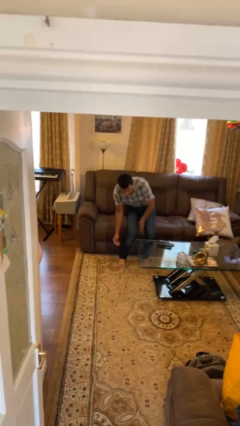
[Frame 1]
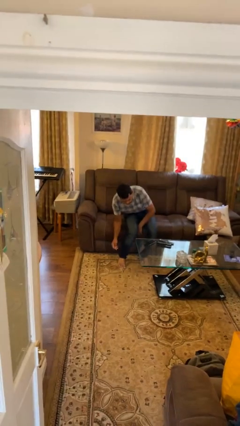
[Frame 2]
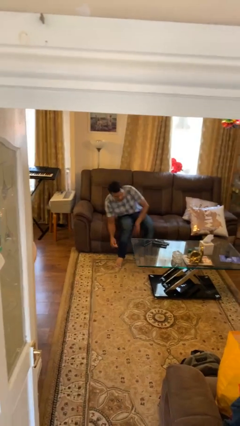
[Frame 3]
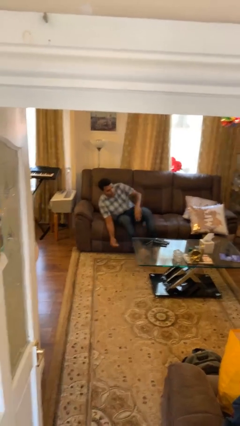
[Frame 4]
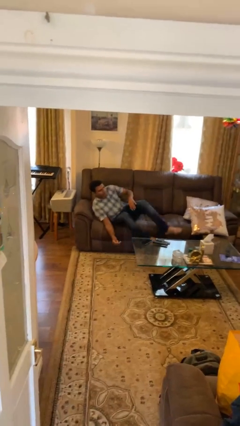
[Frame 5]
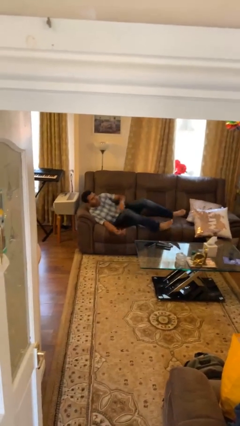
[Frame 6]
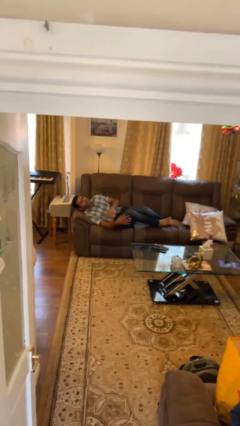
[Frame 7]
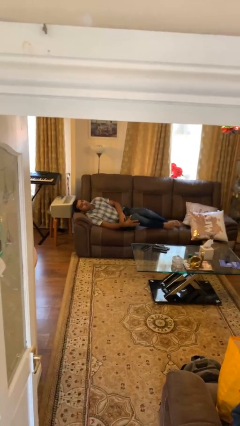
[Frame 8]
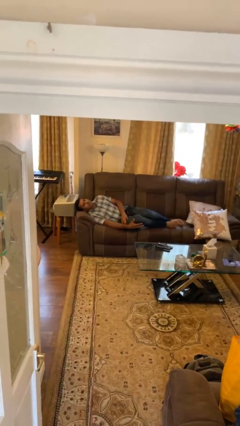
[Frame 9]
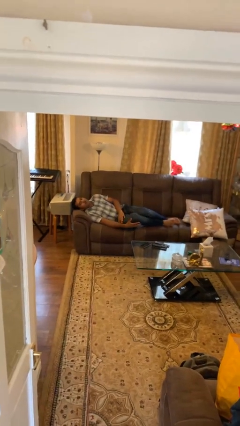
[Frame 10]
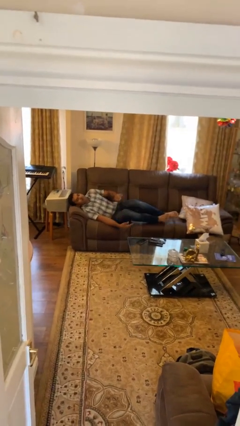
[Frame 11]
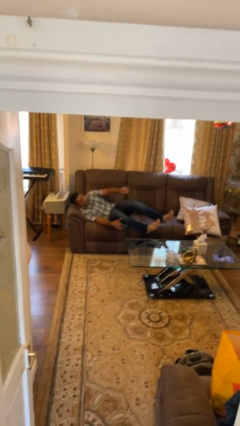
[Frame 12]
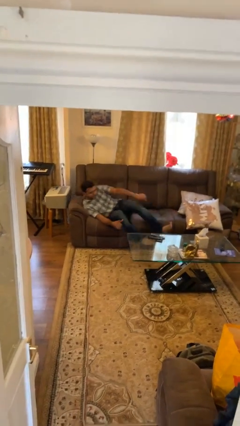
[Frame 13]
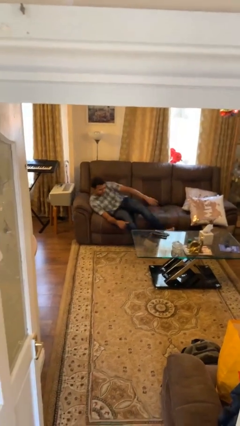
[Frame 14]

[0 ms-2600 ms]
person lies down on couch

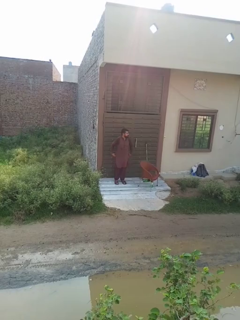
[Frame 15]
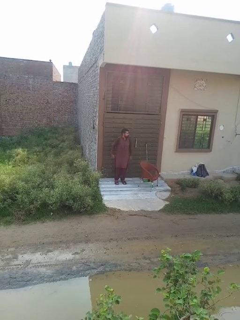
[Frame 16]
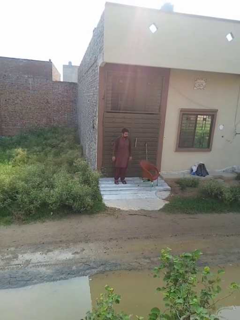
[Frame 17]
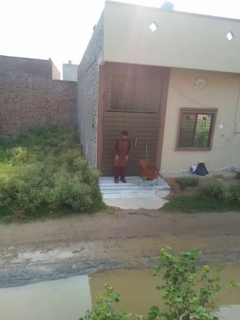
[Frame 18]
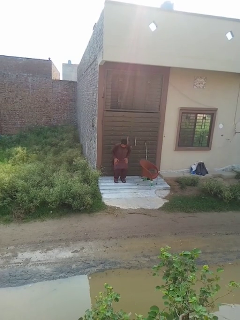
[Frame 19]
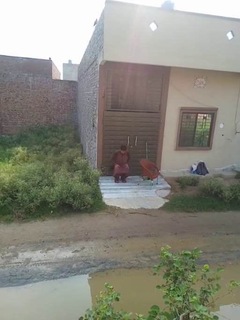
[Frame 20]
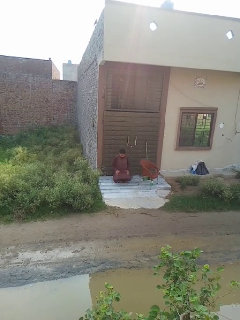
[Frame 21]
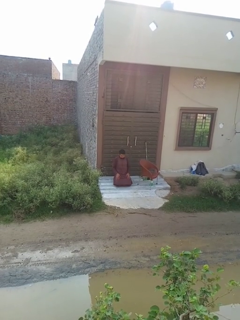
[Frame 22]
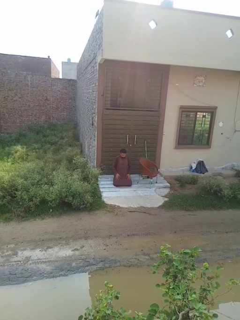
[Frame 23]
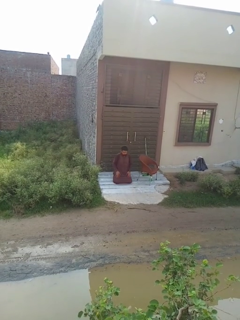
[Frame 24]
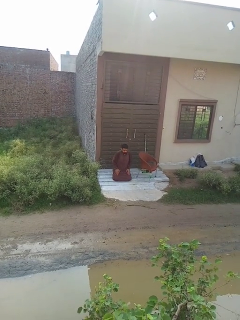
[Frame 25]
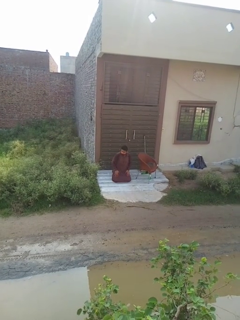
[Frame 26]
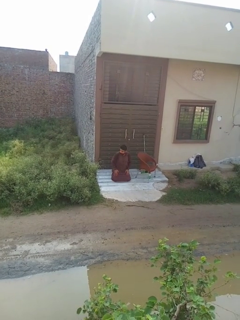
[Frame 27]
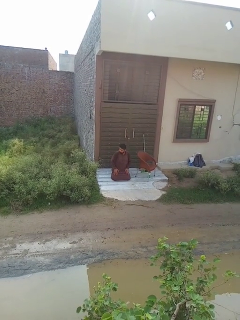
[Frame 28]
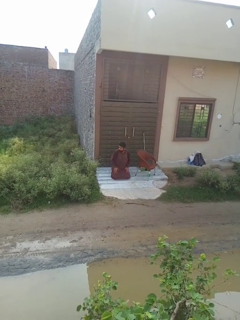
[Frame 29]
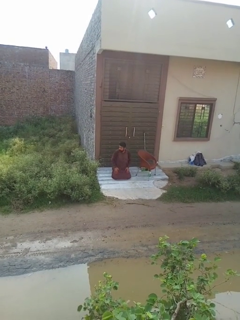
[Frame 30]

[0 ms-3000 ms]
person kneels

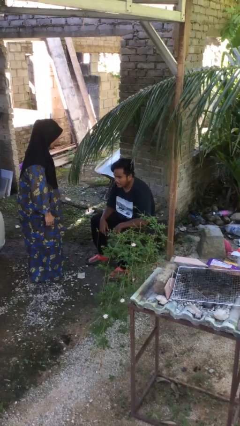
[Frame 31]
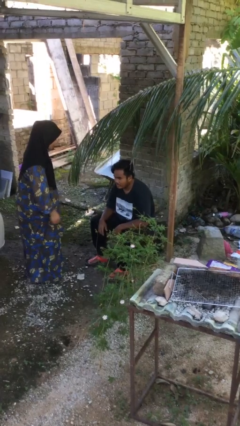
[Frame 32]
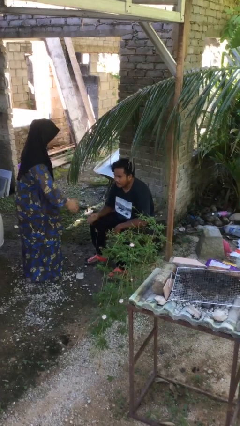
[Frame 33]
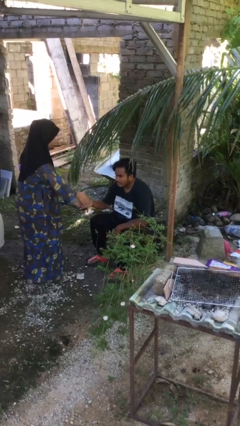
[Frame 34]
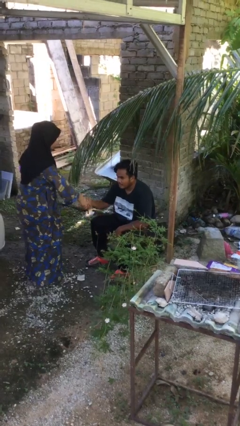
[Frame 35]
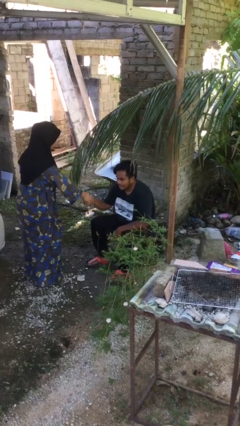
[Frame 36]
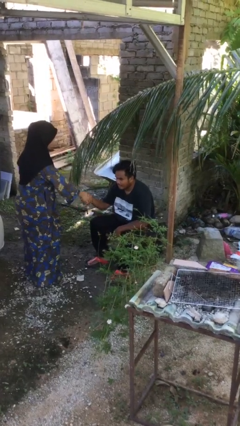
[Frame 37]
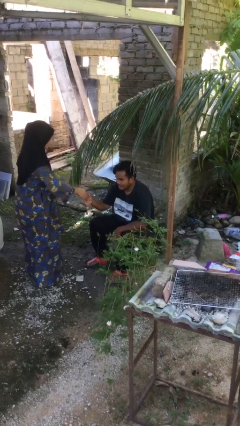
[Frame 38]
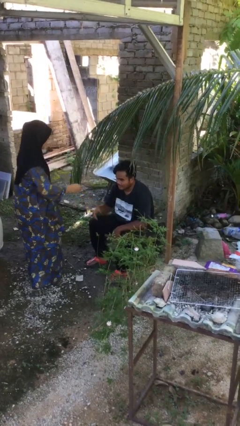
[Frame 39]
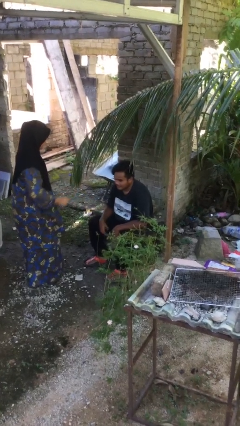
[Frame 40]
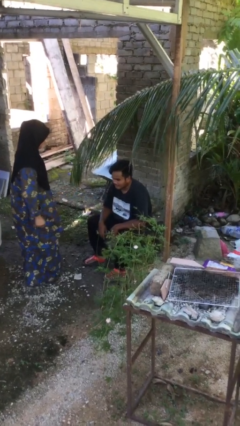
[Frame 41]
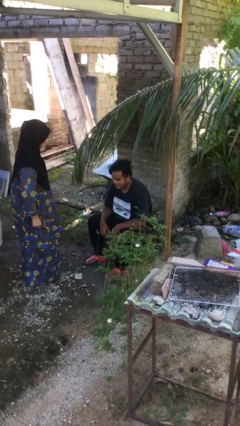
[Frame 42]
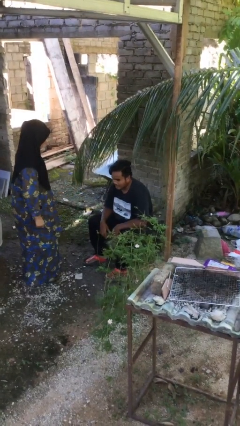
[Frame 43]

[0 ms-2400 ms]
person shakes hand

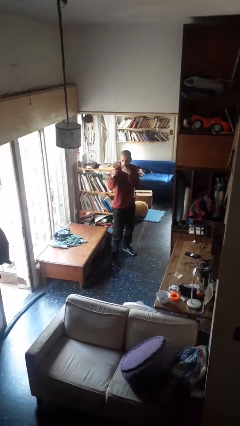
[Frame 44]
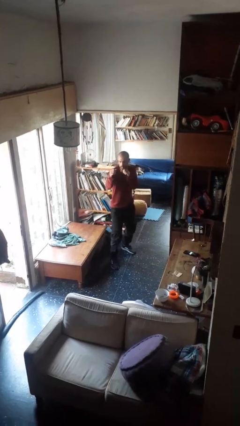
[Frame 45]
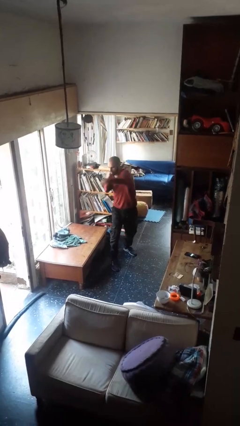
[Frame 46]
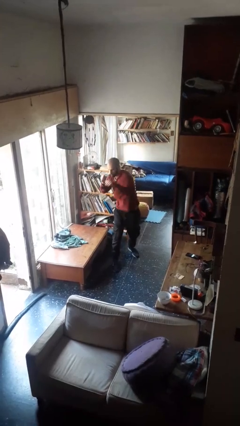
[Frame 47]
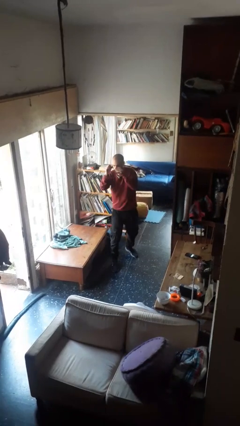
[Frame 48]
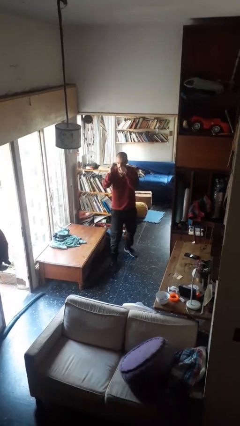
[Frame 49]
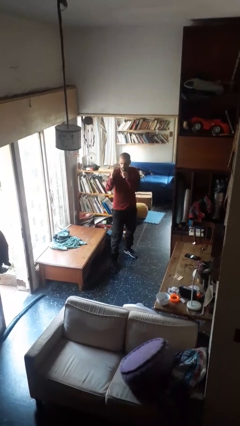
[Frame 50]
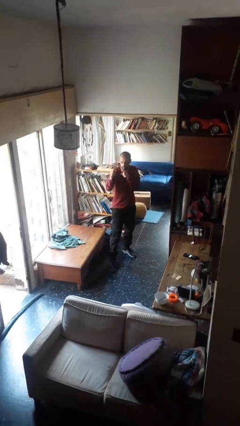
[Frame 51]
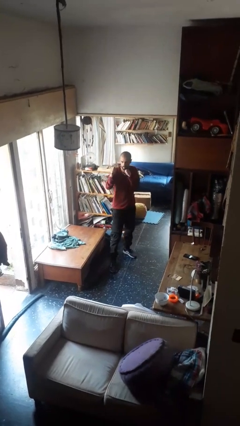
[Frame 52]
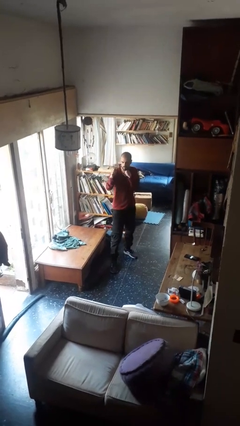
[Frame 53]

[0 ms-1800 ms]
person punches

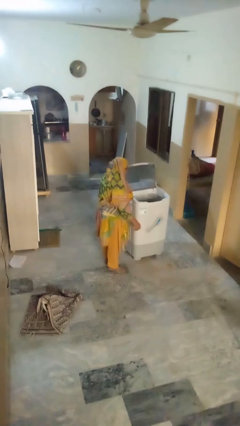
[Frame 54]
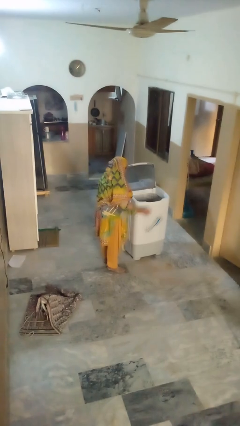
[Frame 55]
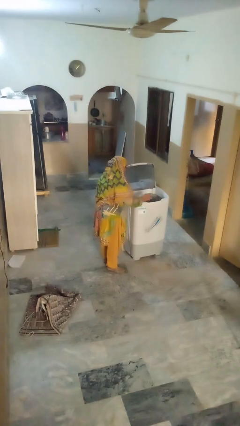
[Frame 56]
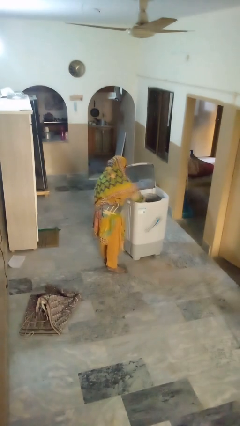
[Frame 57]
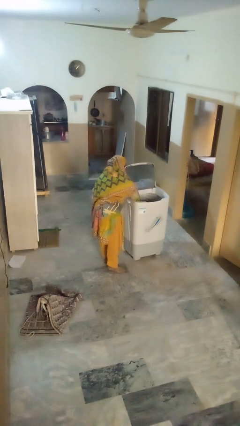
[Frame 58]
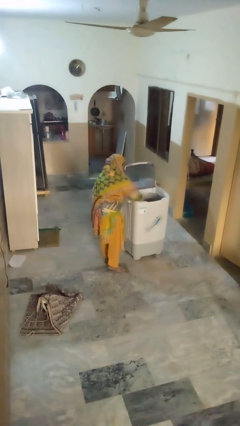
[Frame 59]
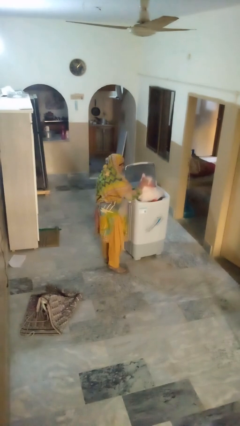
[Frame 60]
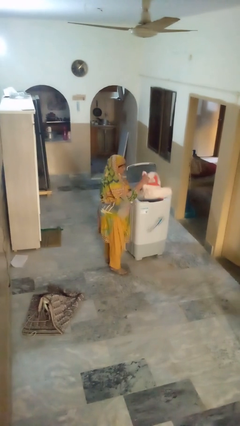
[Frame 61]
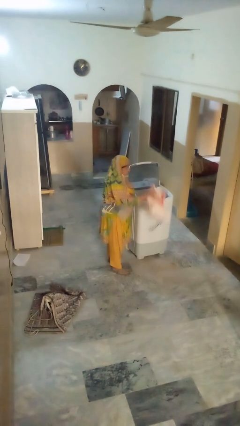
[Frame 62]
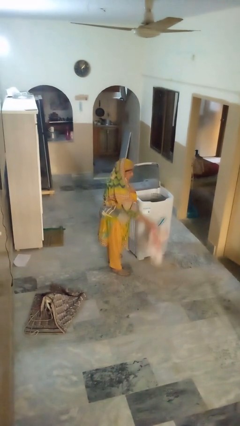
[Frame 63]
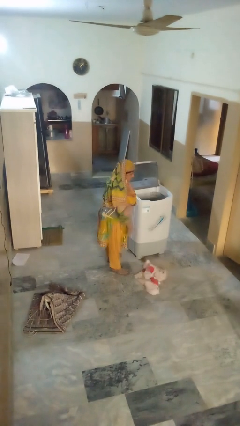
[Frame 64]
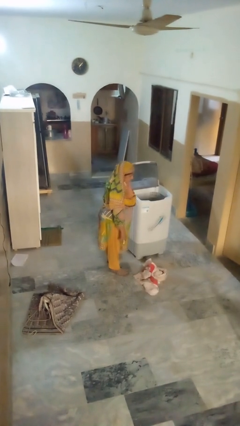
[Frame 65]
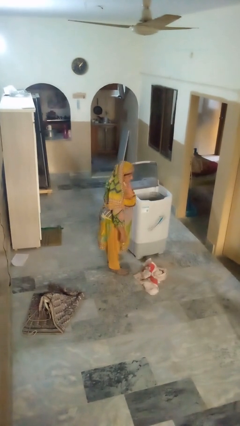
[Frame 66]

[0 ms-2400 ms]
person unloads clotheswasher

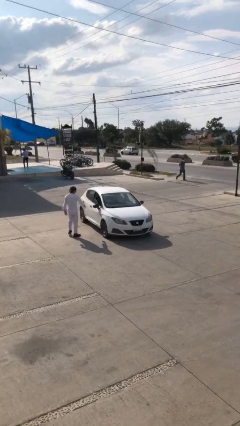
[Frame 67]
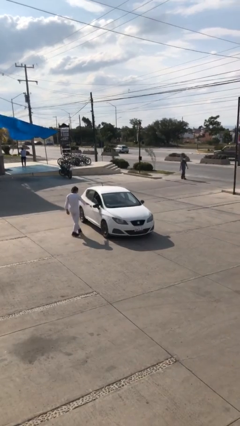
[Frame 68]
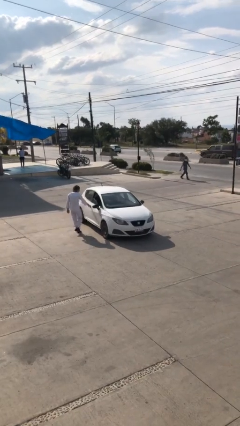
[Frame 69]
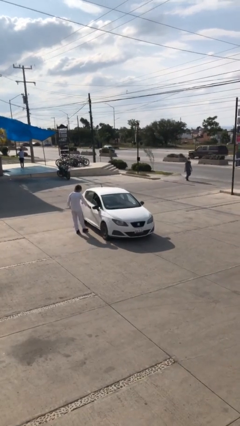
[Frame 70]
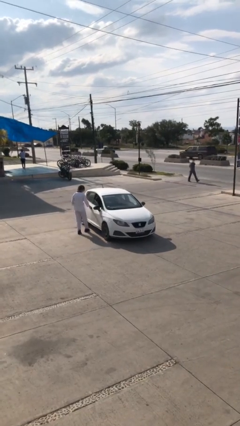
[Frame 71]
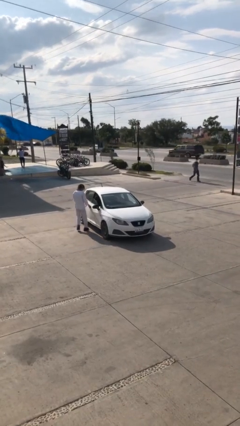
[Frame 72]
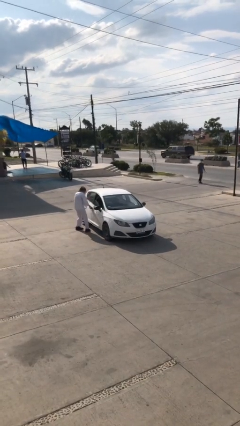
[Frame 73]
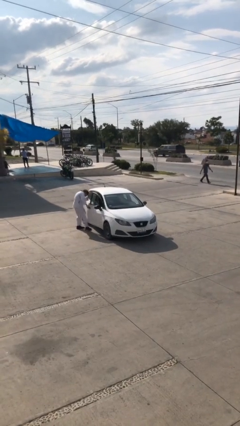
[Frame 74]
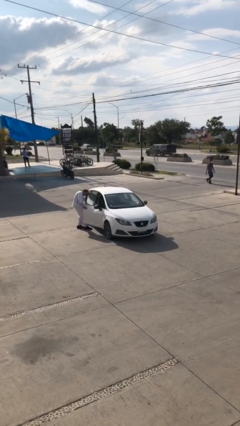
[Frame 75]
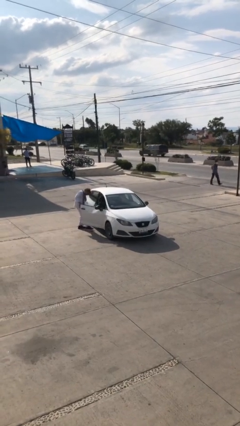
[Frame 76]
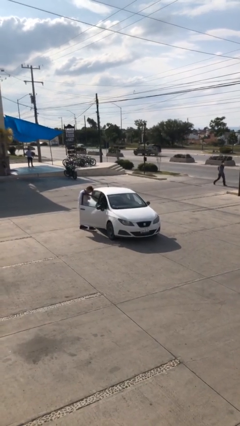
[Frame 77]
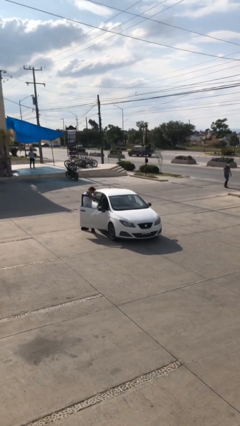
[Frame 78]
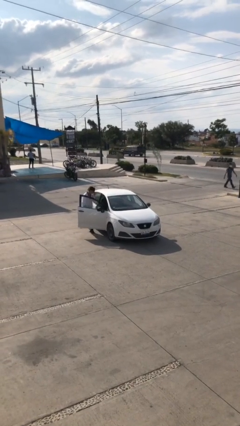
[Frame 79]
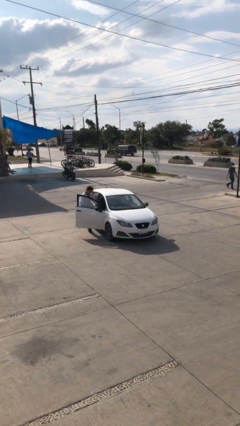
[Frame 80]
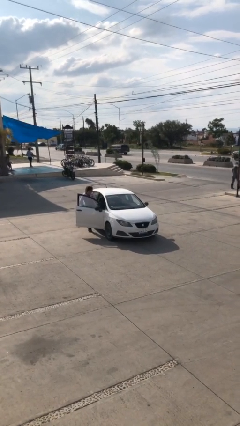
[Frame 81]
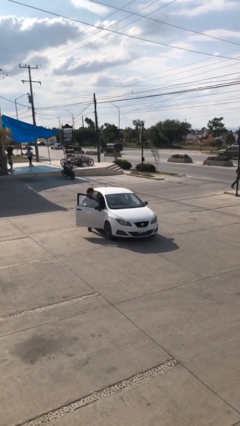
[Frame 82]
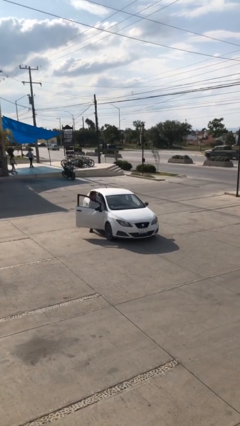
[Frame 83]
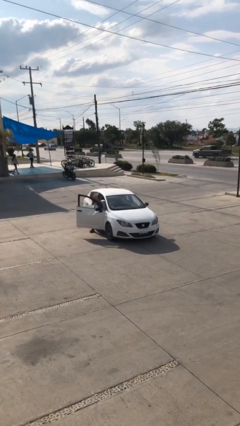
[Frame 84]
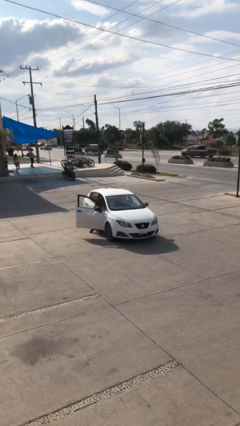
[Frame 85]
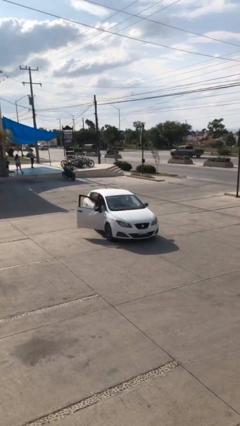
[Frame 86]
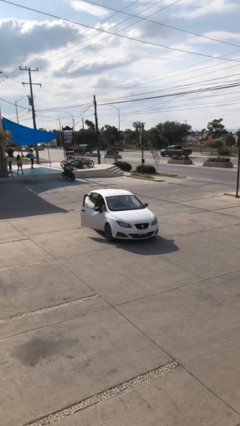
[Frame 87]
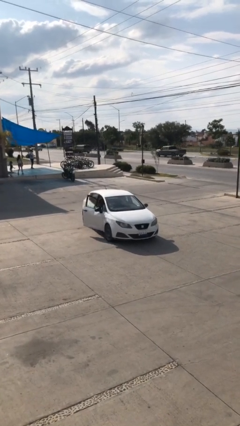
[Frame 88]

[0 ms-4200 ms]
car picks up person

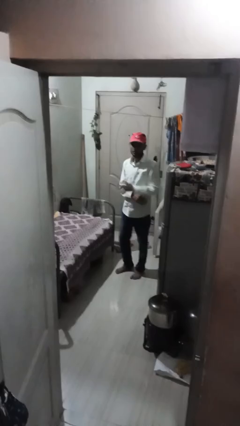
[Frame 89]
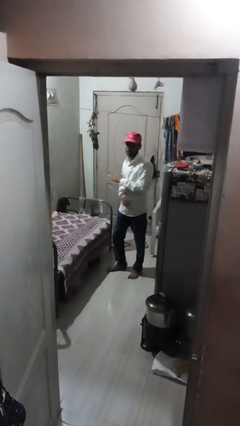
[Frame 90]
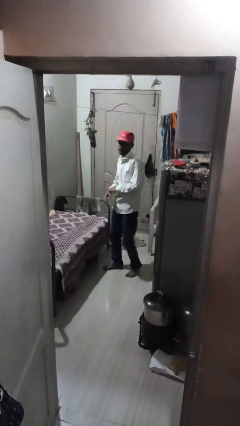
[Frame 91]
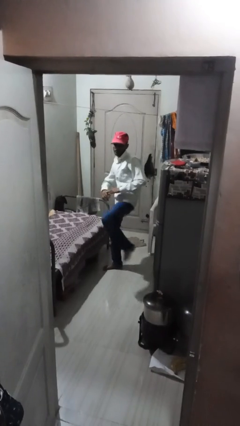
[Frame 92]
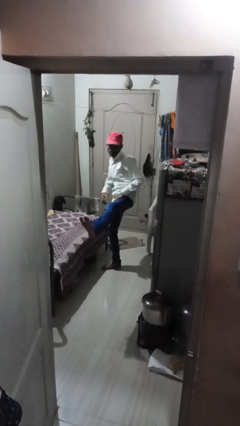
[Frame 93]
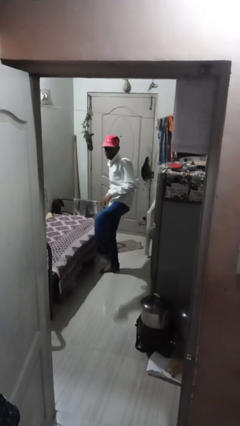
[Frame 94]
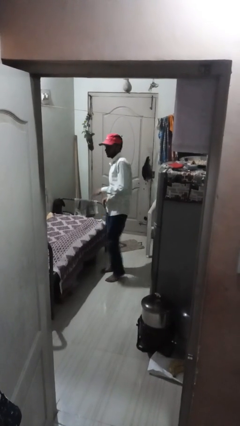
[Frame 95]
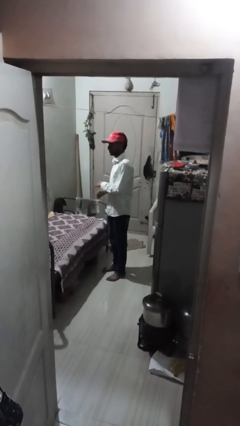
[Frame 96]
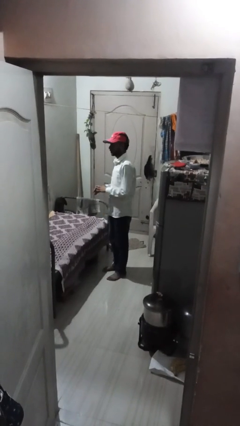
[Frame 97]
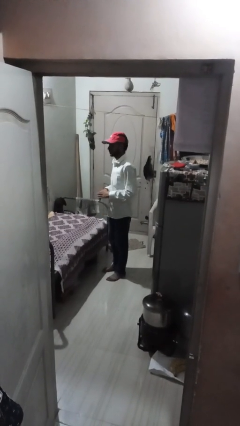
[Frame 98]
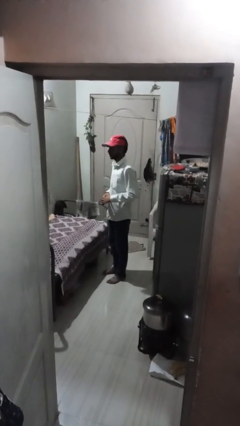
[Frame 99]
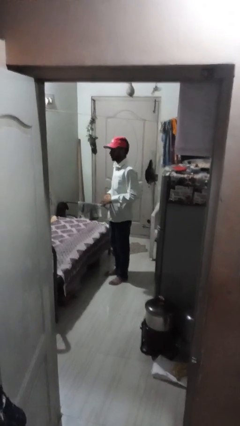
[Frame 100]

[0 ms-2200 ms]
person karate kicks
